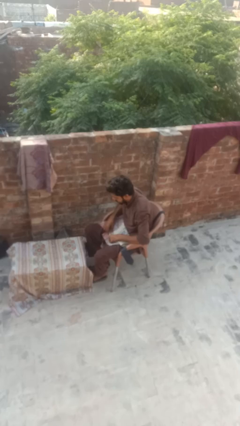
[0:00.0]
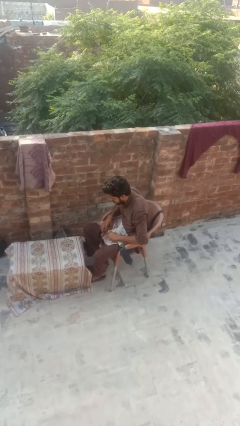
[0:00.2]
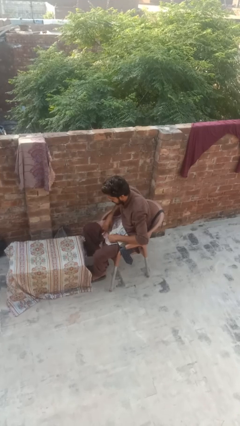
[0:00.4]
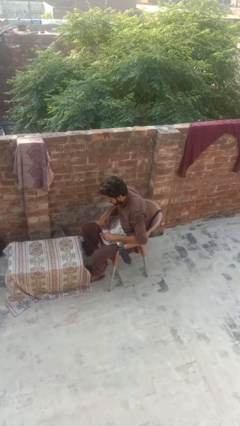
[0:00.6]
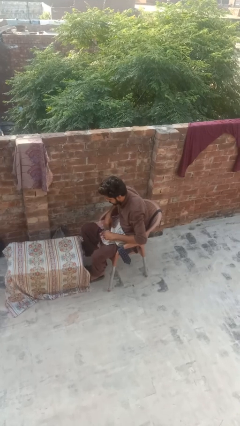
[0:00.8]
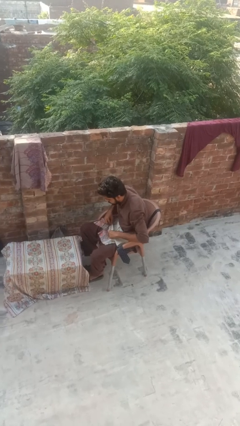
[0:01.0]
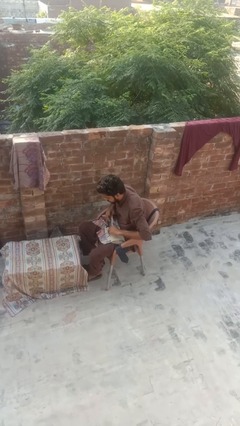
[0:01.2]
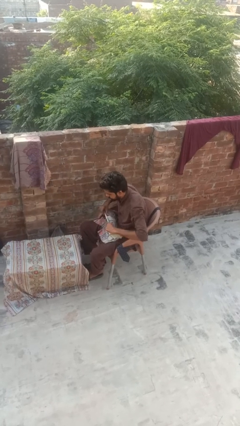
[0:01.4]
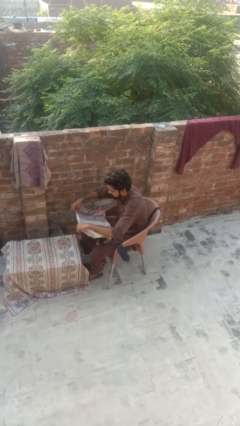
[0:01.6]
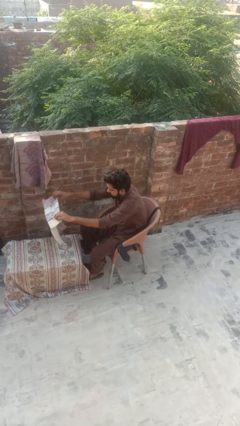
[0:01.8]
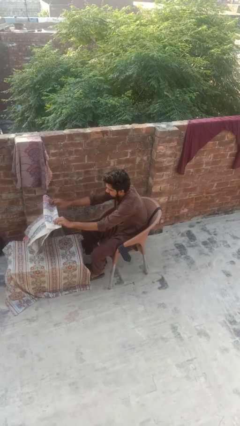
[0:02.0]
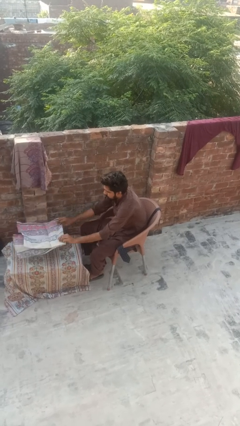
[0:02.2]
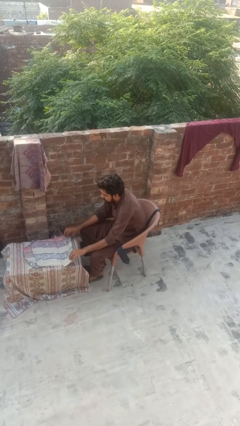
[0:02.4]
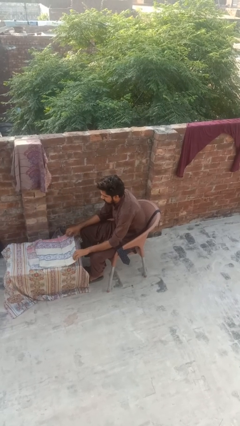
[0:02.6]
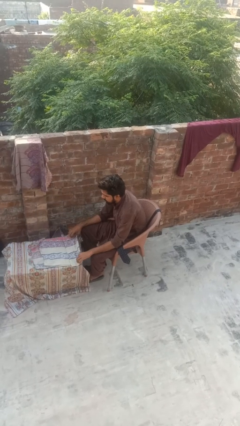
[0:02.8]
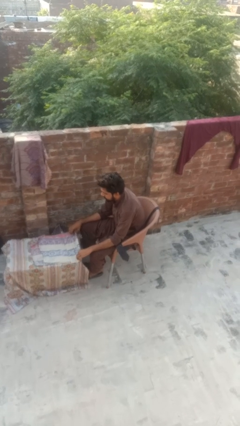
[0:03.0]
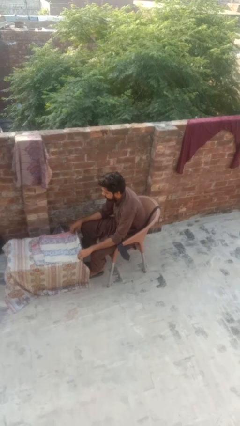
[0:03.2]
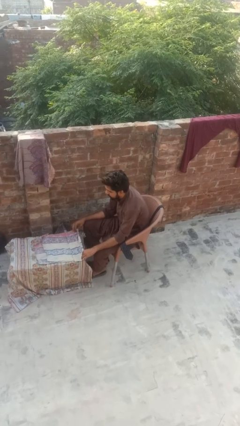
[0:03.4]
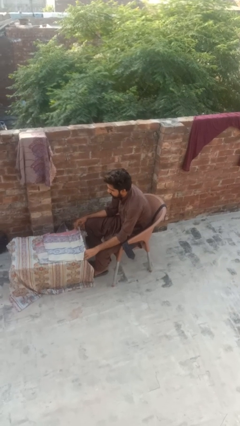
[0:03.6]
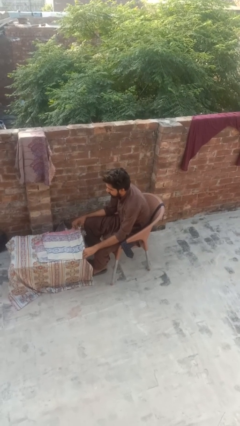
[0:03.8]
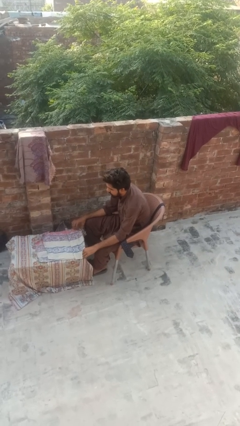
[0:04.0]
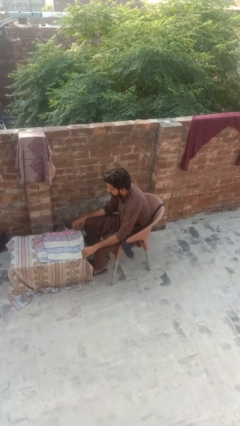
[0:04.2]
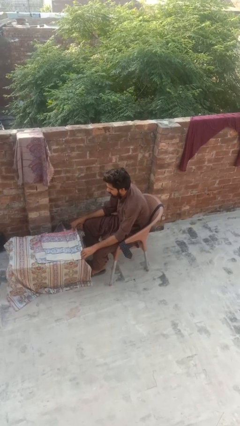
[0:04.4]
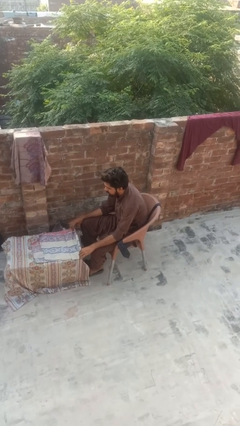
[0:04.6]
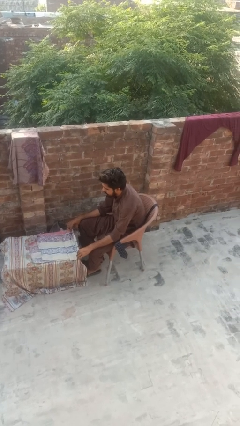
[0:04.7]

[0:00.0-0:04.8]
person spreads tablecloth

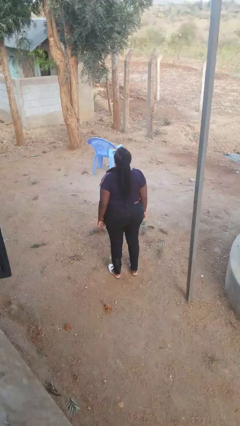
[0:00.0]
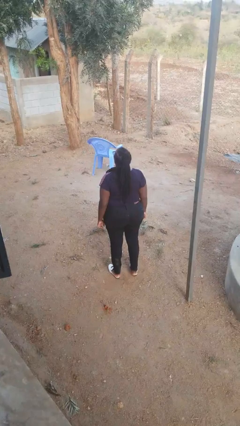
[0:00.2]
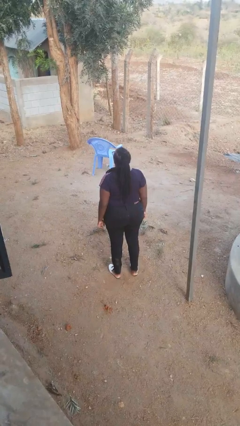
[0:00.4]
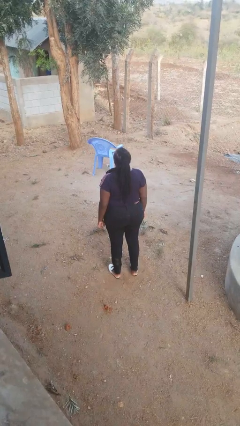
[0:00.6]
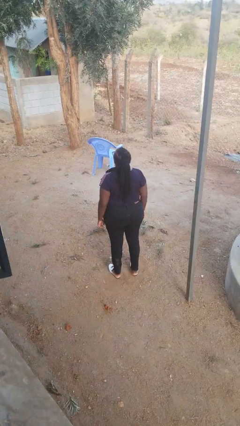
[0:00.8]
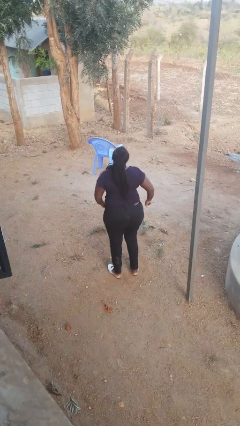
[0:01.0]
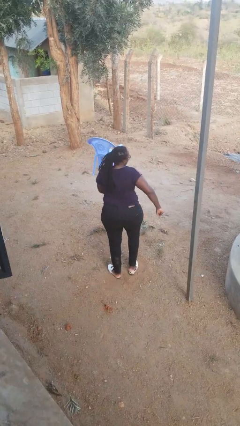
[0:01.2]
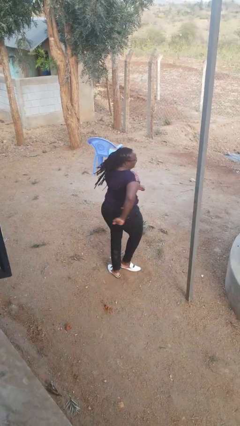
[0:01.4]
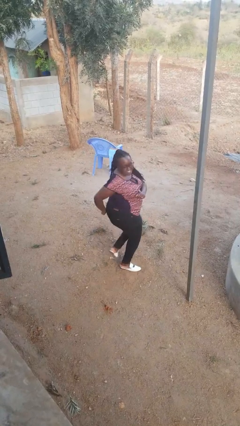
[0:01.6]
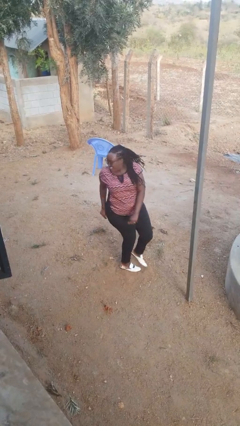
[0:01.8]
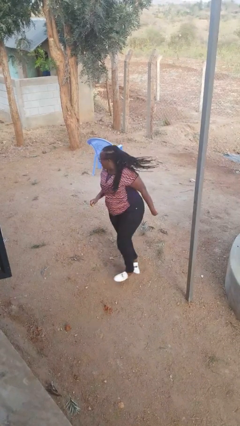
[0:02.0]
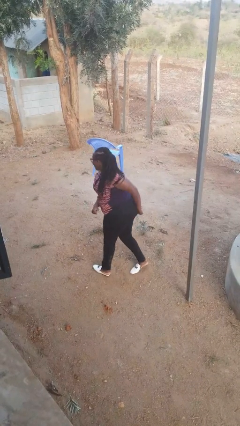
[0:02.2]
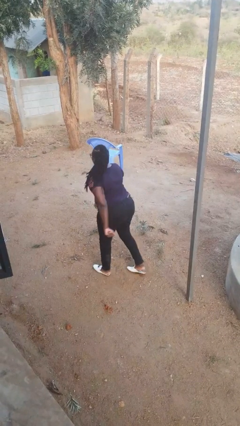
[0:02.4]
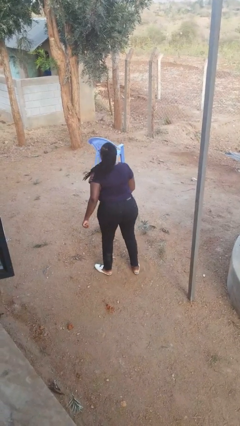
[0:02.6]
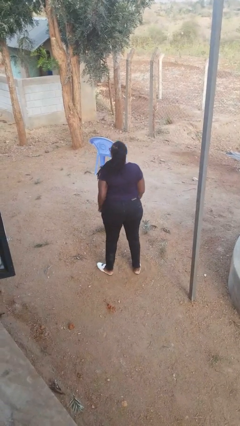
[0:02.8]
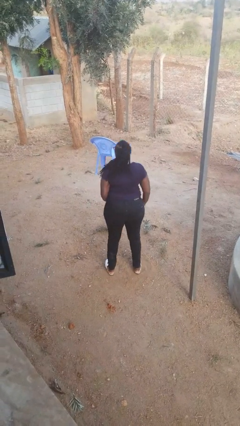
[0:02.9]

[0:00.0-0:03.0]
person twirls

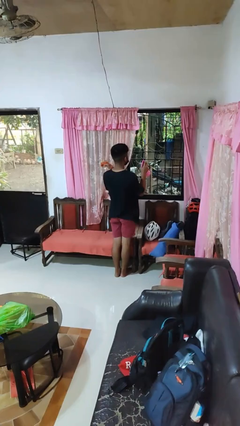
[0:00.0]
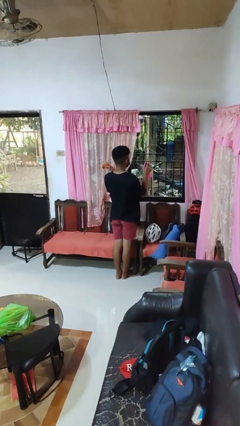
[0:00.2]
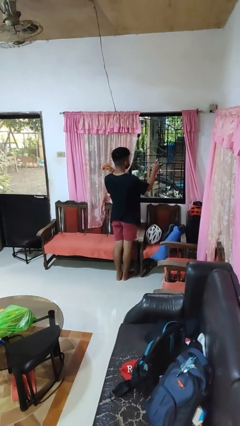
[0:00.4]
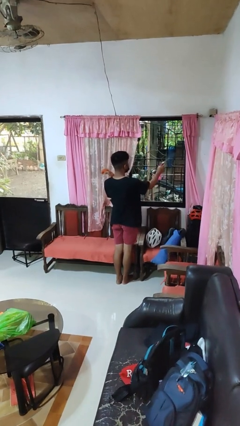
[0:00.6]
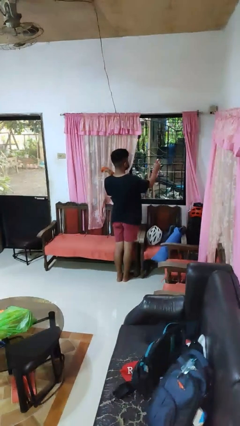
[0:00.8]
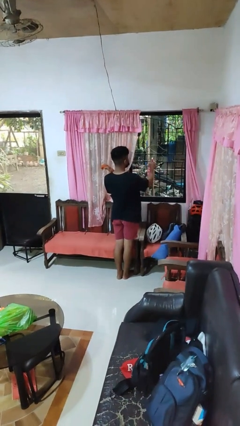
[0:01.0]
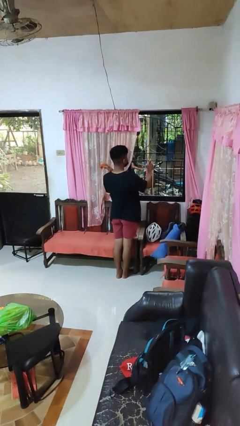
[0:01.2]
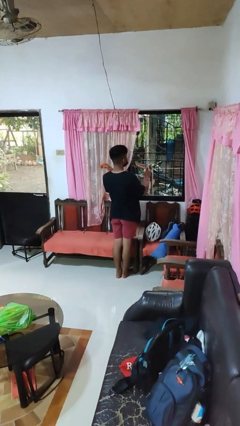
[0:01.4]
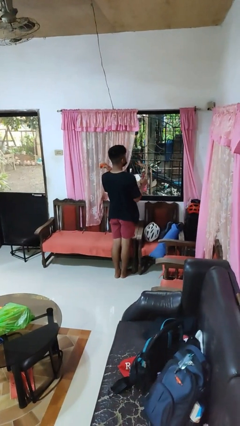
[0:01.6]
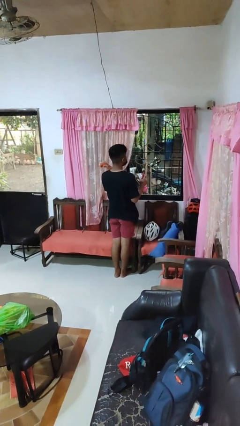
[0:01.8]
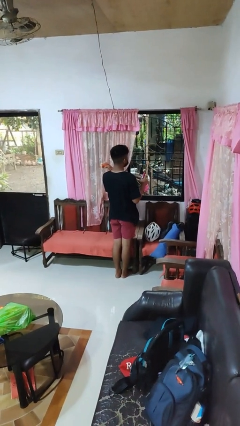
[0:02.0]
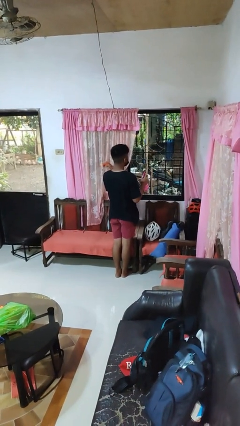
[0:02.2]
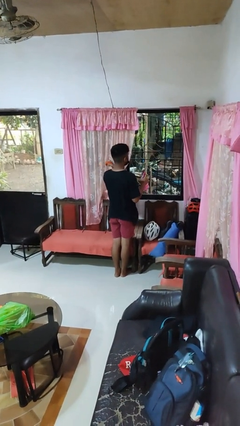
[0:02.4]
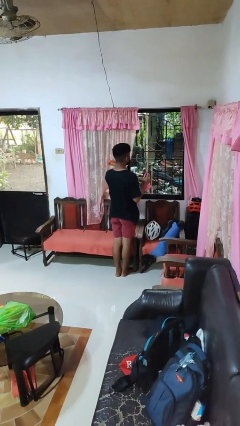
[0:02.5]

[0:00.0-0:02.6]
person sprays from bottle

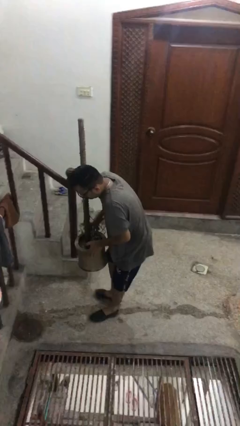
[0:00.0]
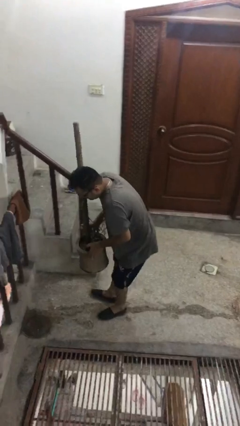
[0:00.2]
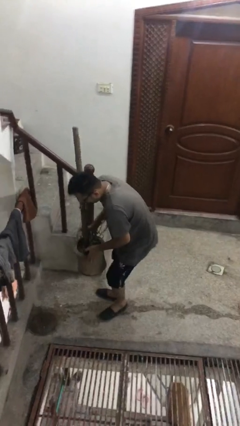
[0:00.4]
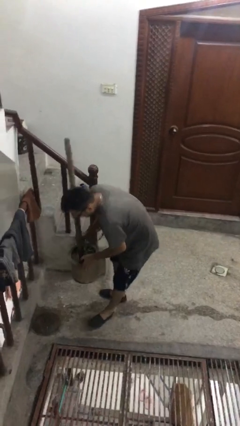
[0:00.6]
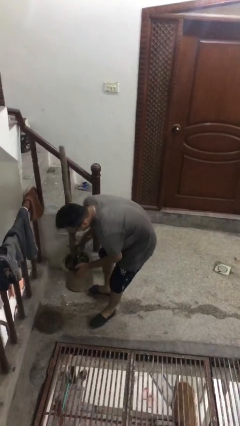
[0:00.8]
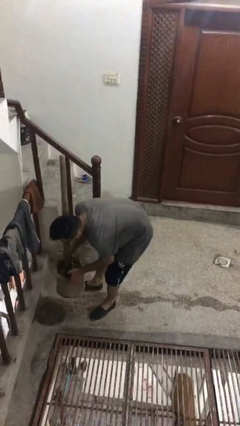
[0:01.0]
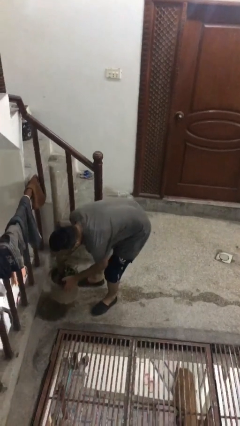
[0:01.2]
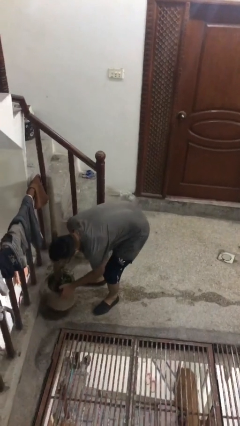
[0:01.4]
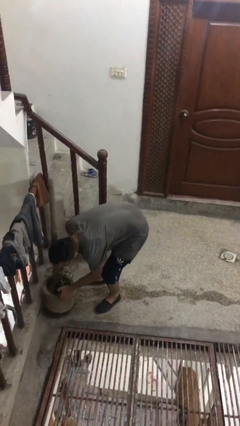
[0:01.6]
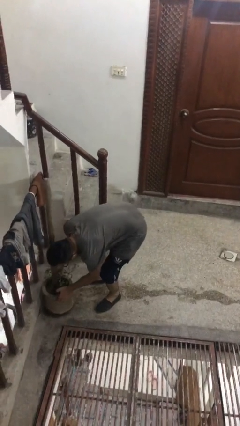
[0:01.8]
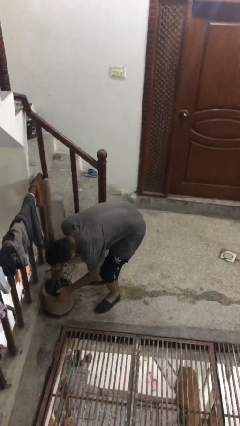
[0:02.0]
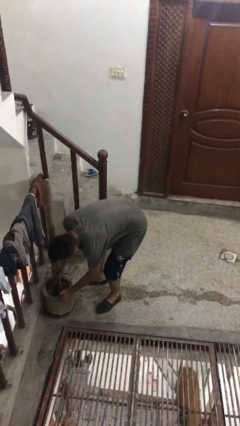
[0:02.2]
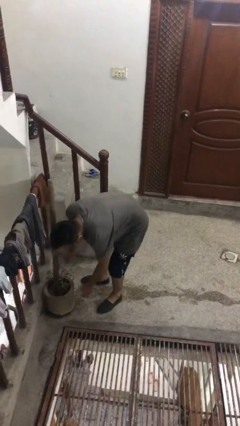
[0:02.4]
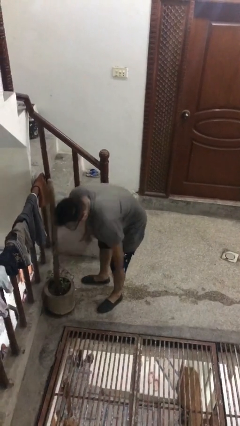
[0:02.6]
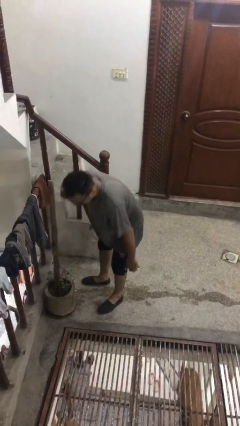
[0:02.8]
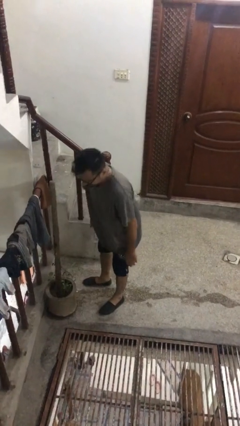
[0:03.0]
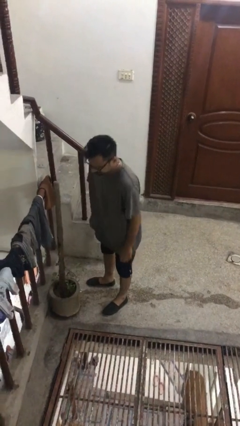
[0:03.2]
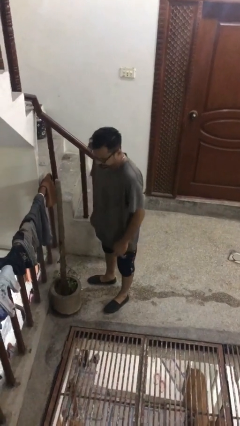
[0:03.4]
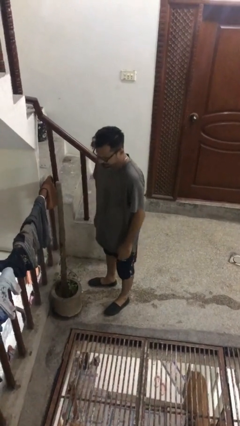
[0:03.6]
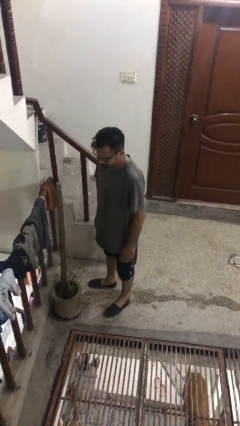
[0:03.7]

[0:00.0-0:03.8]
person puts down object on floor

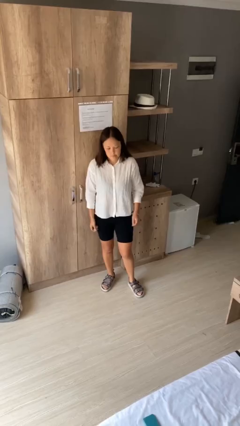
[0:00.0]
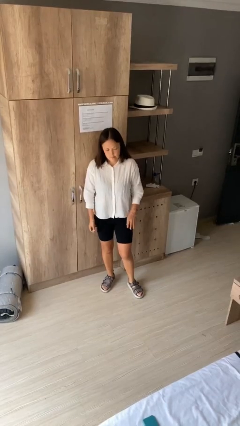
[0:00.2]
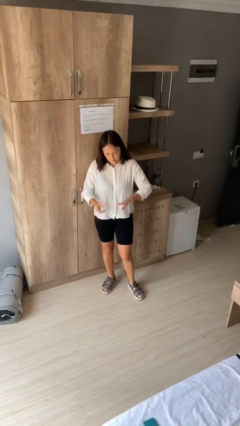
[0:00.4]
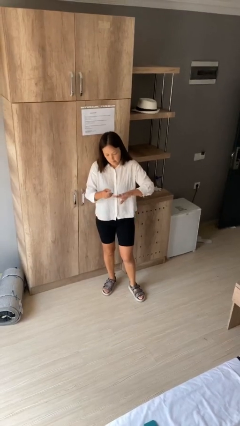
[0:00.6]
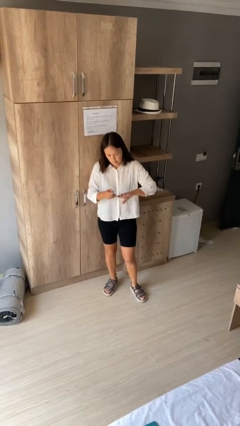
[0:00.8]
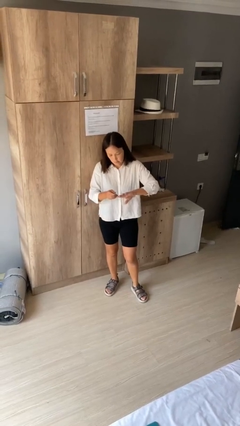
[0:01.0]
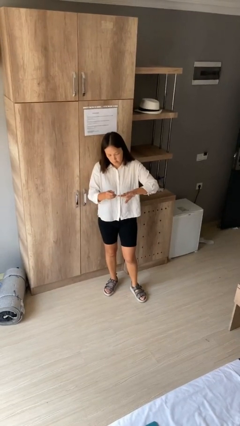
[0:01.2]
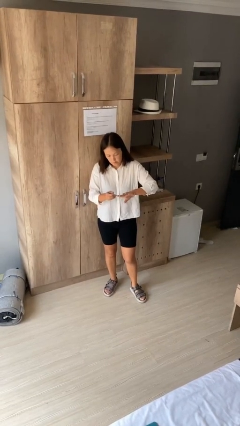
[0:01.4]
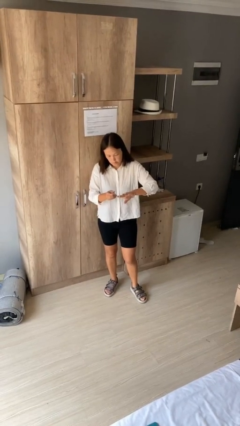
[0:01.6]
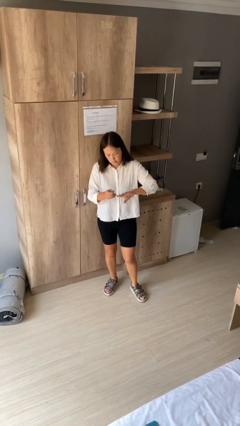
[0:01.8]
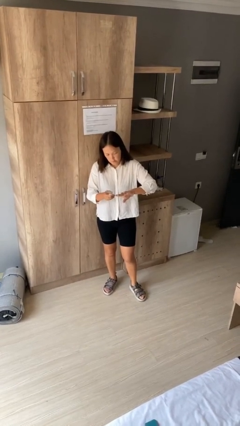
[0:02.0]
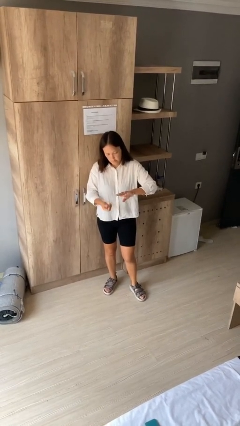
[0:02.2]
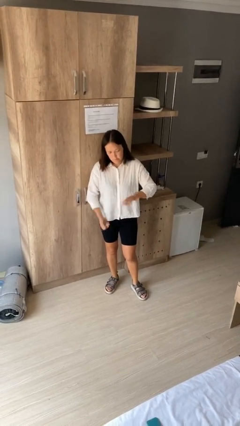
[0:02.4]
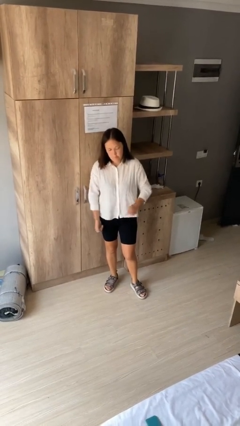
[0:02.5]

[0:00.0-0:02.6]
person clips fingernails

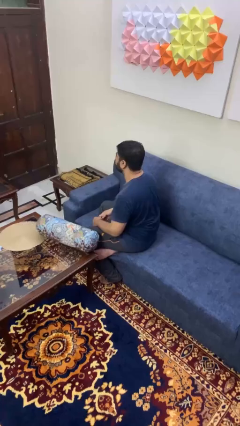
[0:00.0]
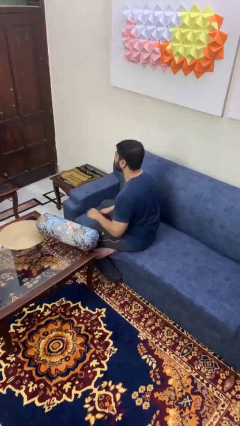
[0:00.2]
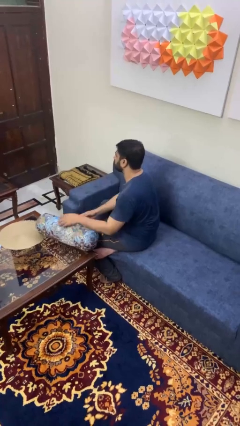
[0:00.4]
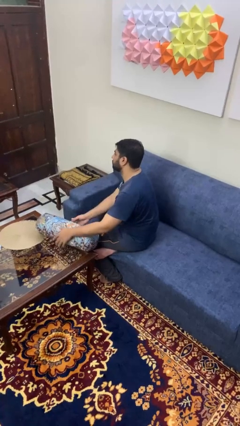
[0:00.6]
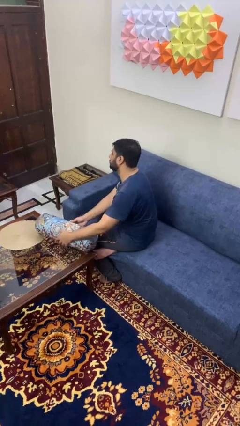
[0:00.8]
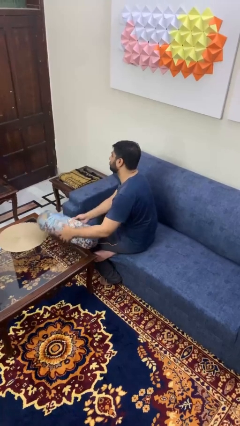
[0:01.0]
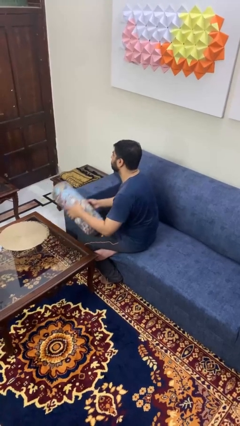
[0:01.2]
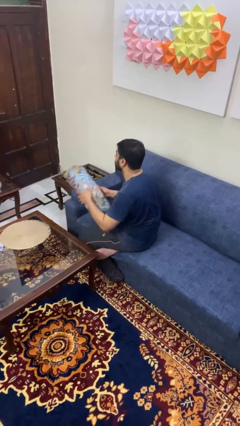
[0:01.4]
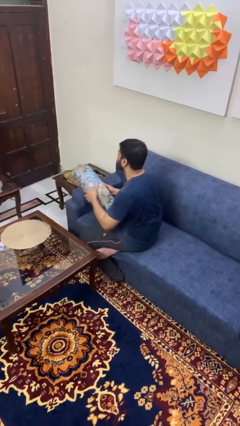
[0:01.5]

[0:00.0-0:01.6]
person picks up object from table
